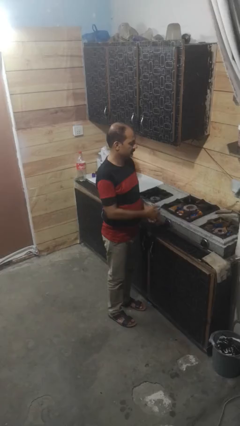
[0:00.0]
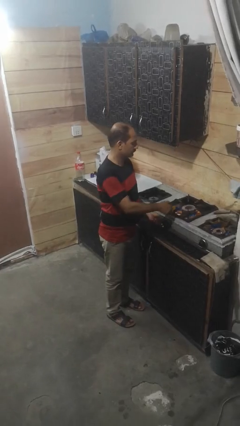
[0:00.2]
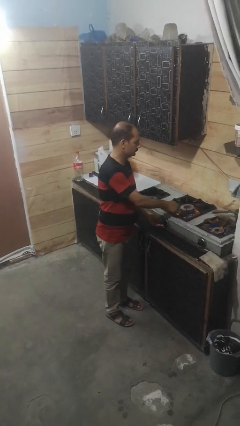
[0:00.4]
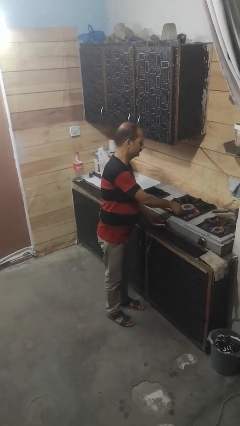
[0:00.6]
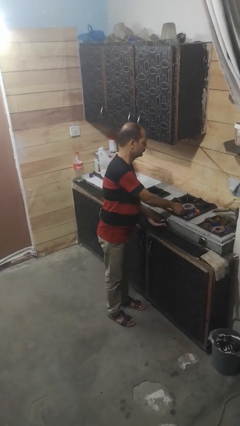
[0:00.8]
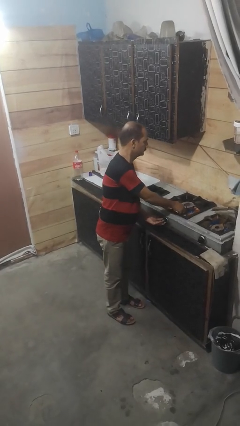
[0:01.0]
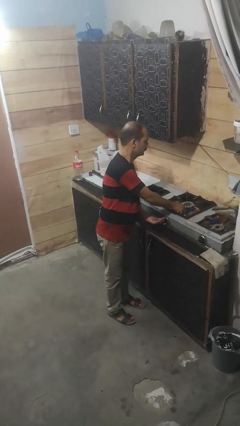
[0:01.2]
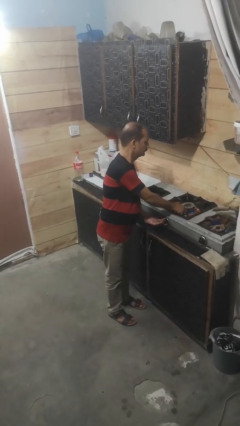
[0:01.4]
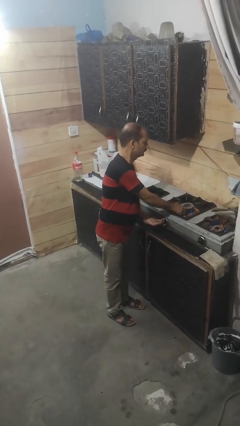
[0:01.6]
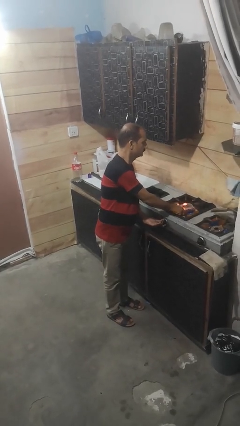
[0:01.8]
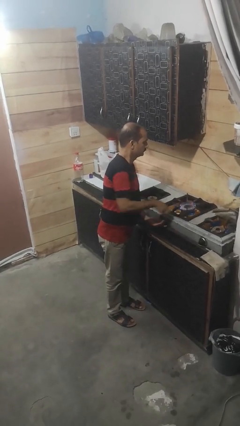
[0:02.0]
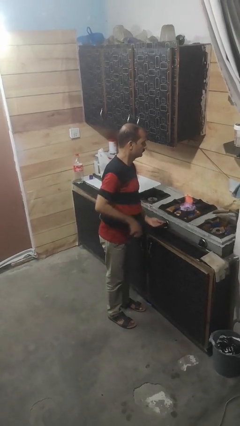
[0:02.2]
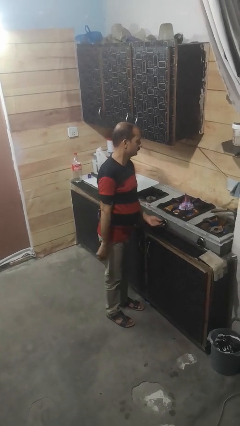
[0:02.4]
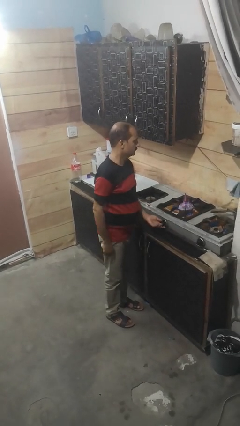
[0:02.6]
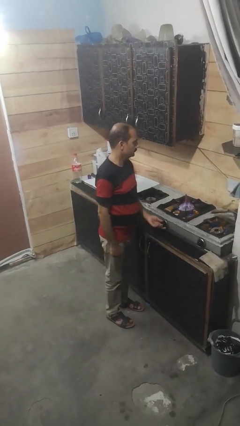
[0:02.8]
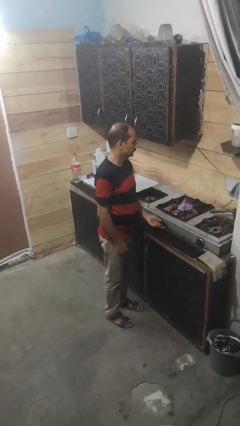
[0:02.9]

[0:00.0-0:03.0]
person turns on stovetop

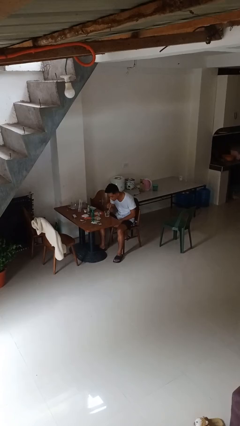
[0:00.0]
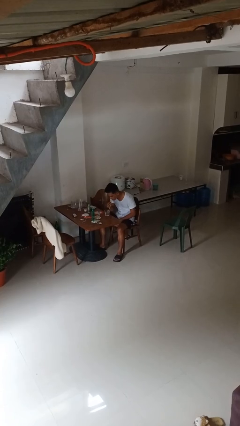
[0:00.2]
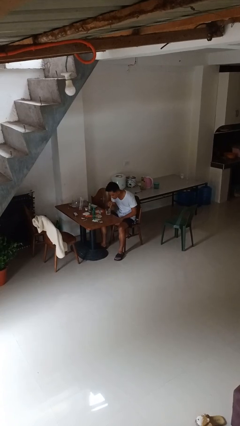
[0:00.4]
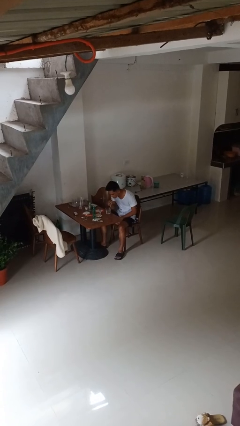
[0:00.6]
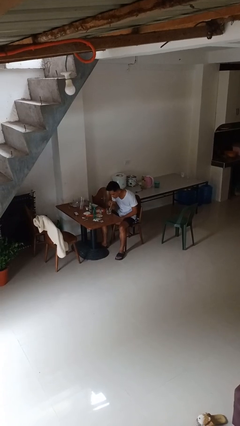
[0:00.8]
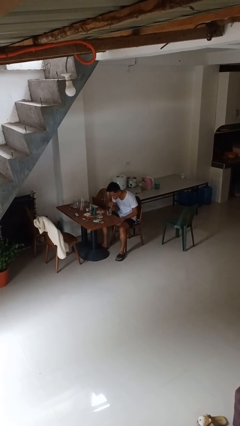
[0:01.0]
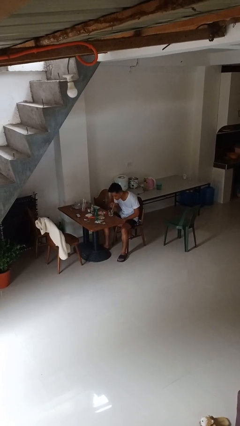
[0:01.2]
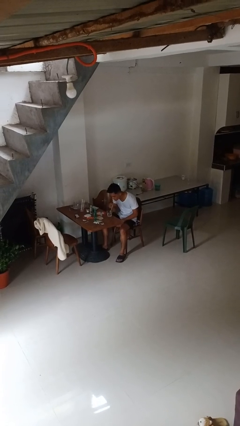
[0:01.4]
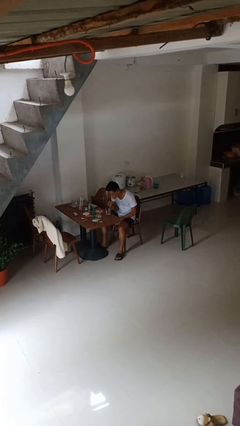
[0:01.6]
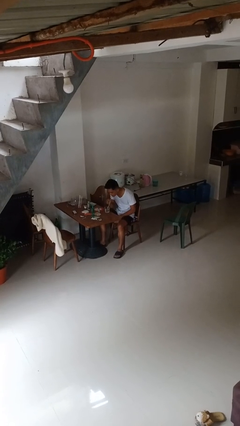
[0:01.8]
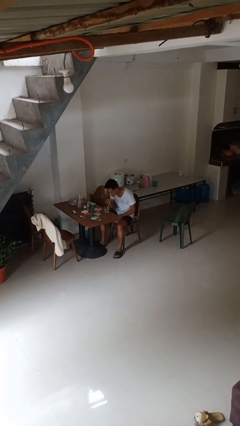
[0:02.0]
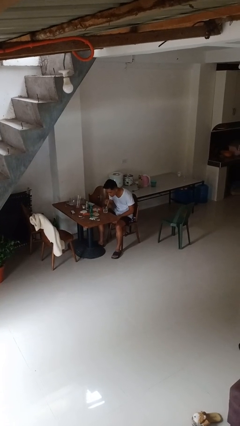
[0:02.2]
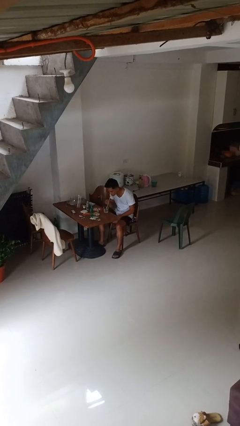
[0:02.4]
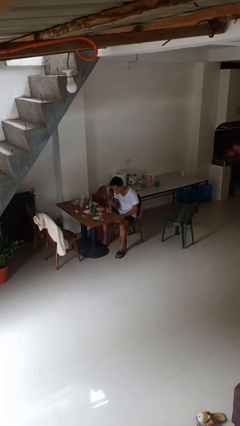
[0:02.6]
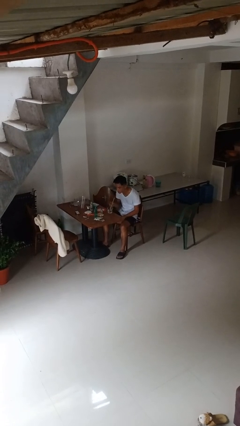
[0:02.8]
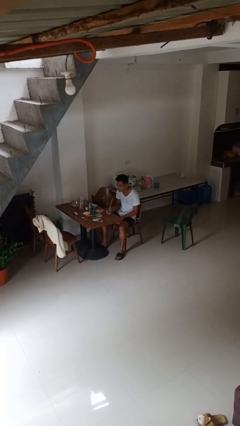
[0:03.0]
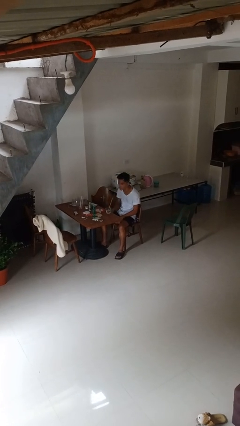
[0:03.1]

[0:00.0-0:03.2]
person drinks from straw

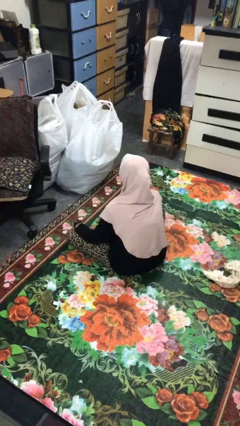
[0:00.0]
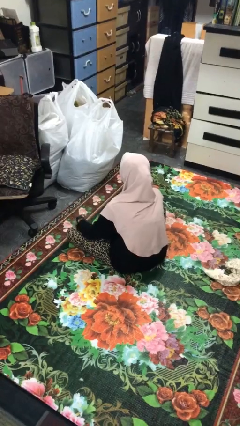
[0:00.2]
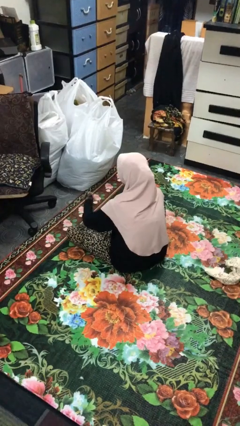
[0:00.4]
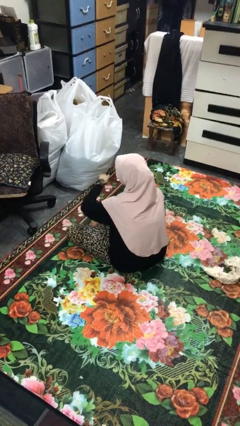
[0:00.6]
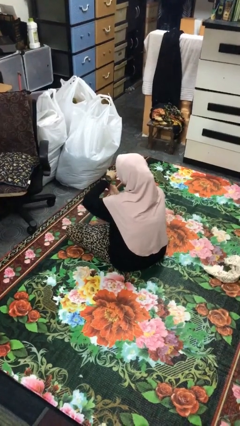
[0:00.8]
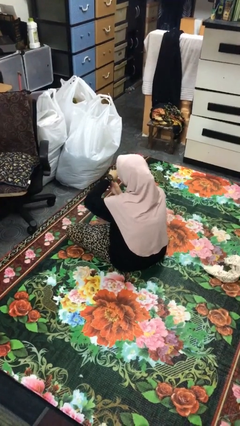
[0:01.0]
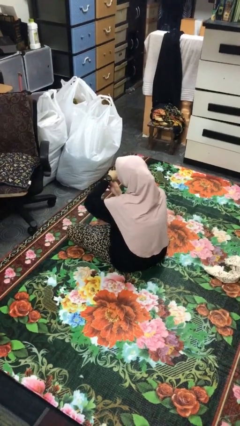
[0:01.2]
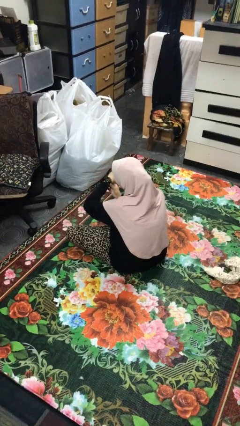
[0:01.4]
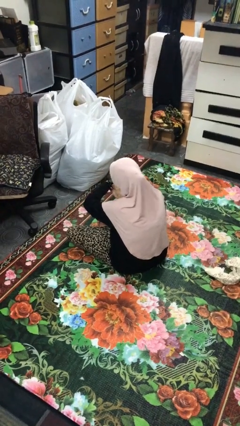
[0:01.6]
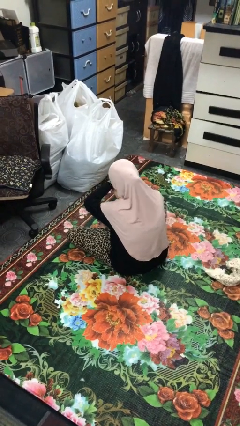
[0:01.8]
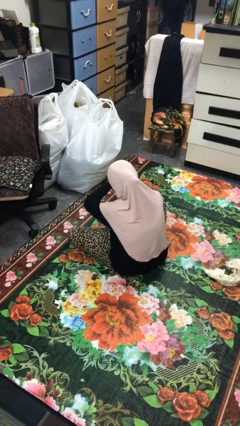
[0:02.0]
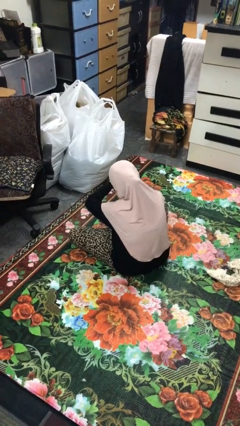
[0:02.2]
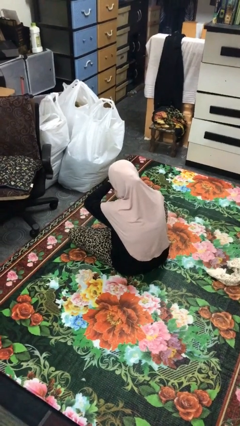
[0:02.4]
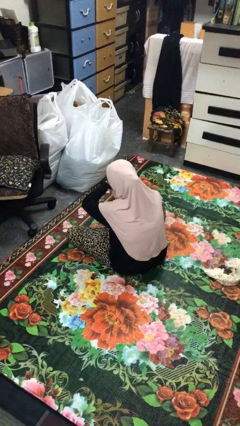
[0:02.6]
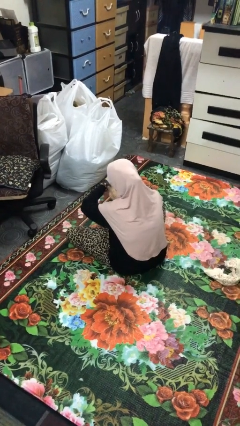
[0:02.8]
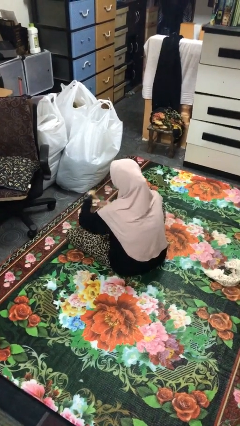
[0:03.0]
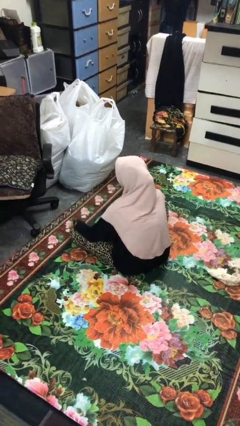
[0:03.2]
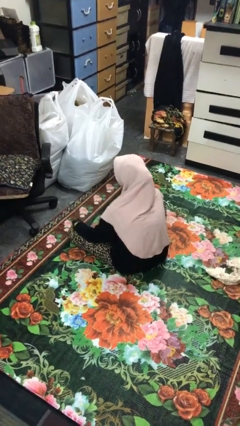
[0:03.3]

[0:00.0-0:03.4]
person looks at wristwatch

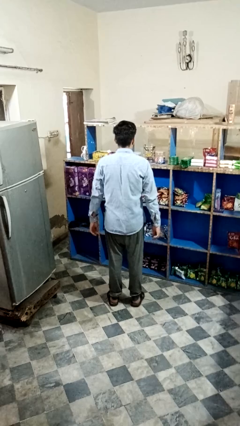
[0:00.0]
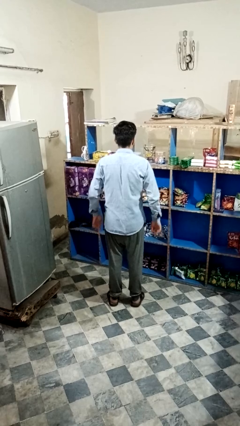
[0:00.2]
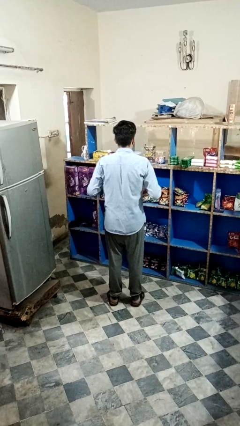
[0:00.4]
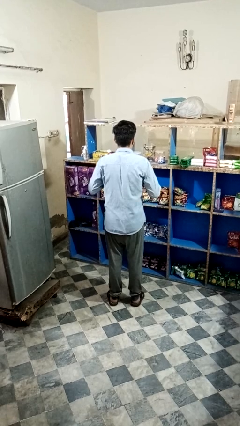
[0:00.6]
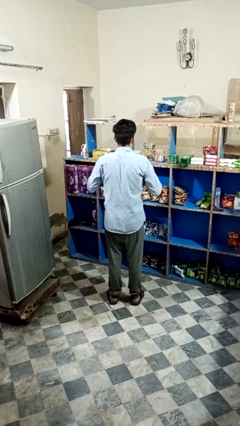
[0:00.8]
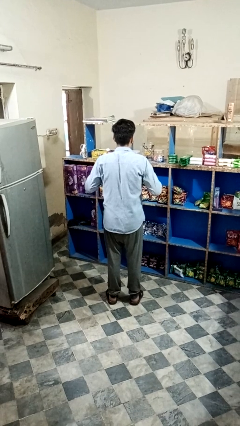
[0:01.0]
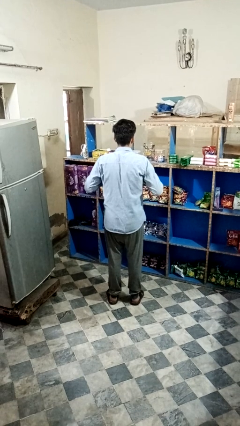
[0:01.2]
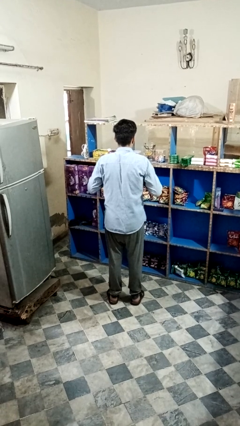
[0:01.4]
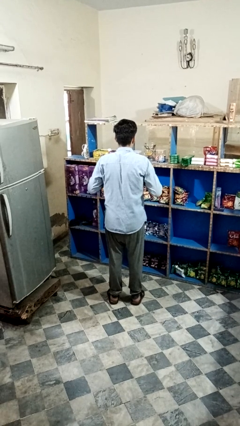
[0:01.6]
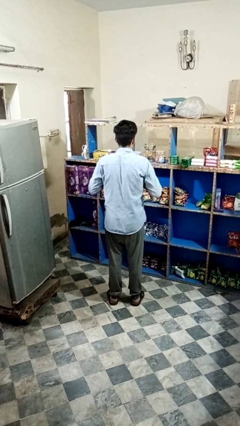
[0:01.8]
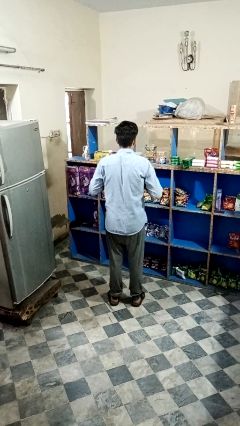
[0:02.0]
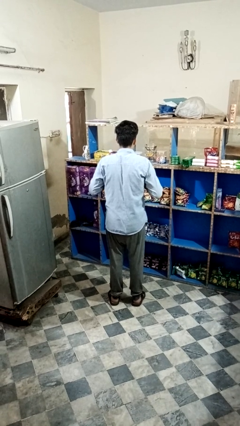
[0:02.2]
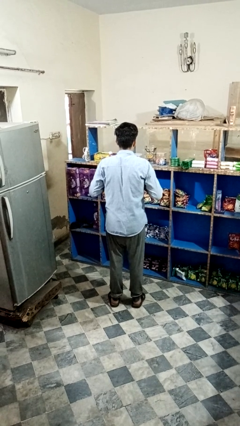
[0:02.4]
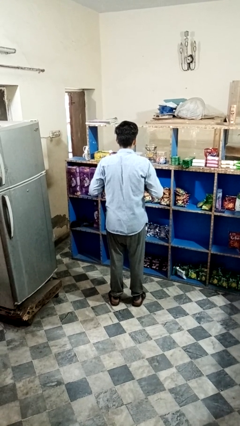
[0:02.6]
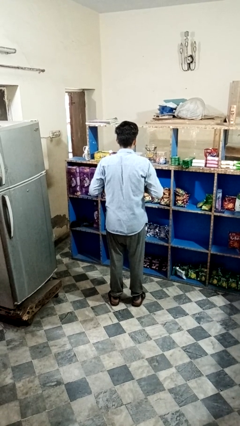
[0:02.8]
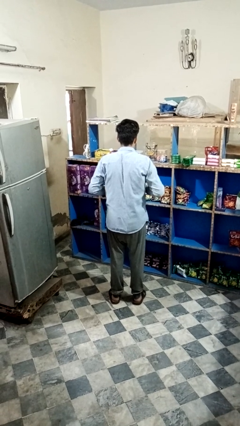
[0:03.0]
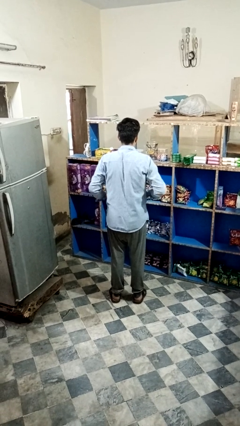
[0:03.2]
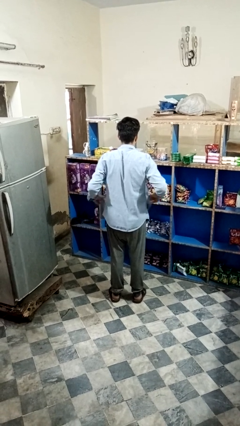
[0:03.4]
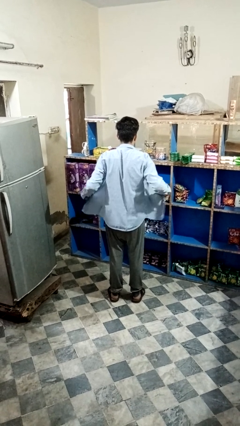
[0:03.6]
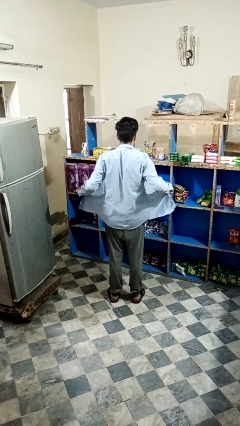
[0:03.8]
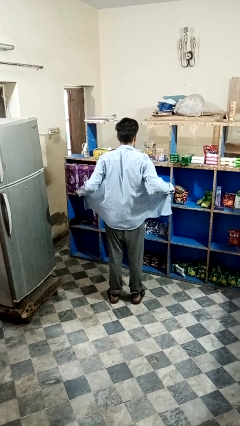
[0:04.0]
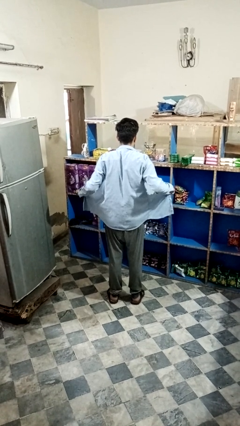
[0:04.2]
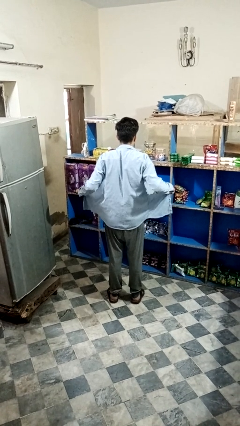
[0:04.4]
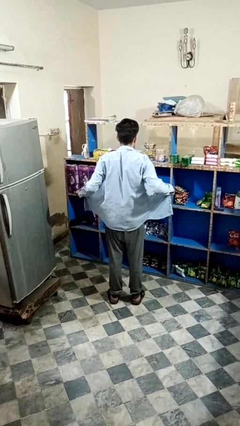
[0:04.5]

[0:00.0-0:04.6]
person unbuttons shirt

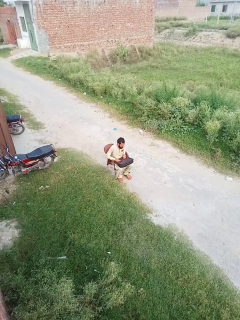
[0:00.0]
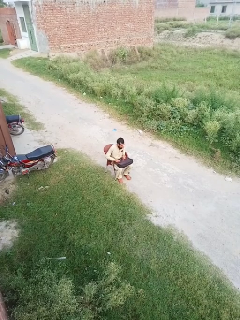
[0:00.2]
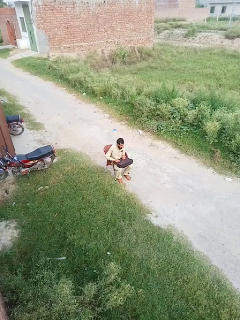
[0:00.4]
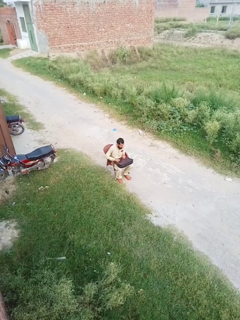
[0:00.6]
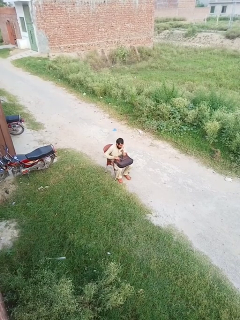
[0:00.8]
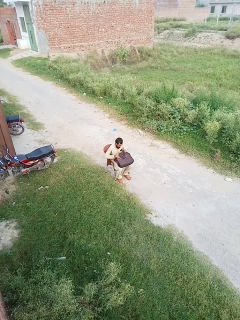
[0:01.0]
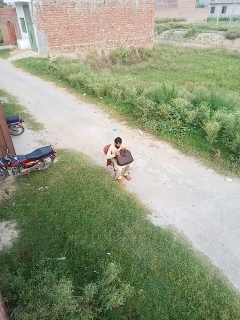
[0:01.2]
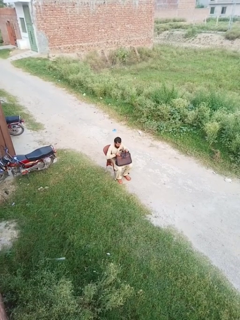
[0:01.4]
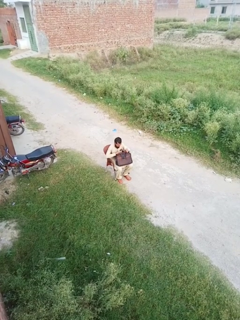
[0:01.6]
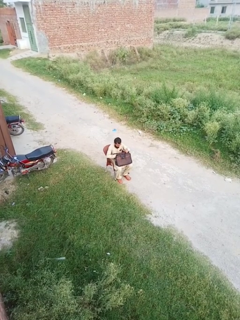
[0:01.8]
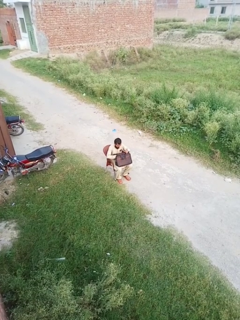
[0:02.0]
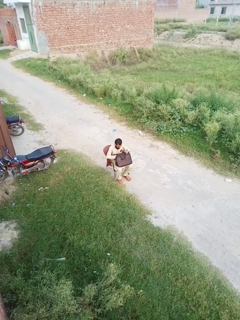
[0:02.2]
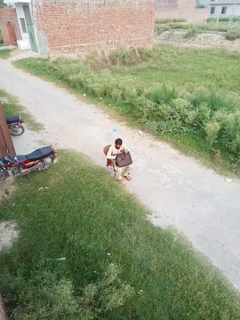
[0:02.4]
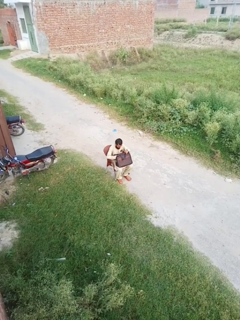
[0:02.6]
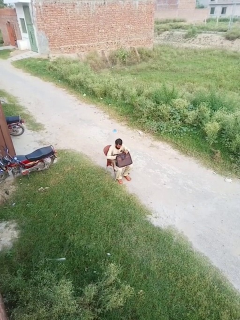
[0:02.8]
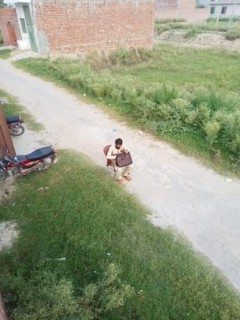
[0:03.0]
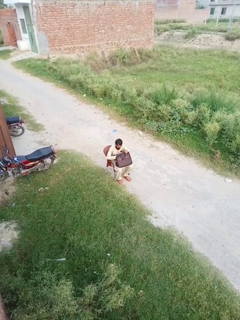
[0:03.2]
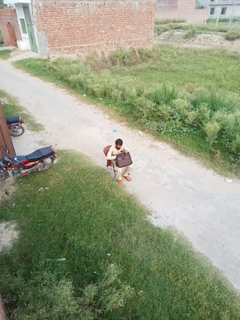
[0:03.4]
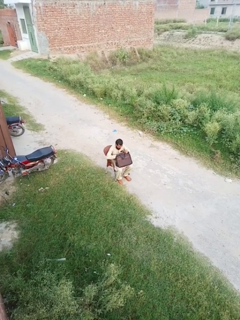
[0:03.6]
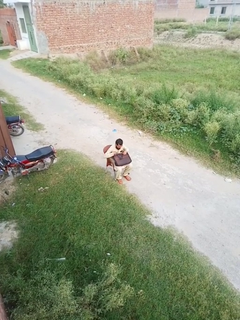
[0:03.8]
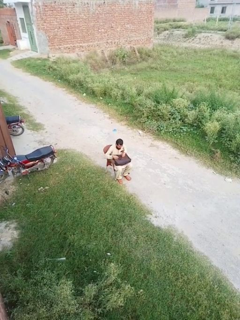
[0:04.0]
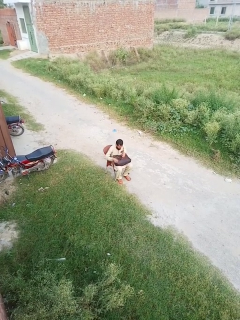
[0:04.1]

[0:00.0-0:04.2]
person searches in bag
